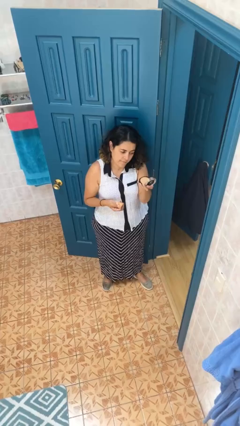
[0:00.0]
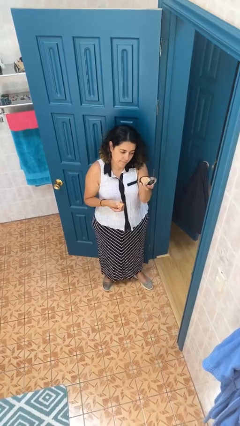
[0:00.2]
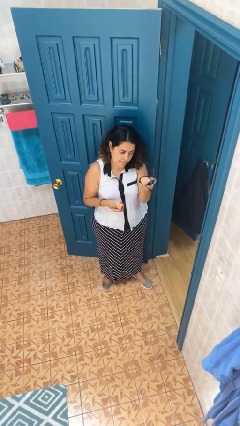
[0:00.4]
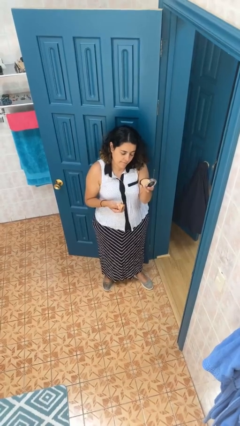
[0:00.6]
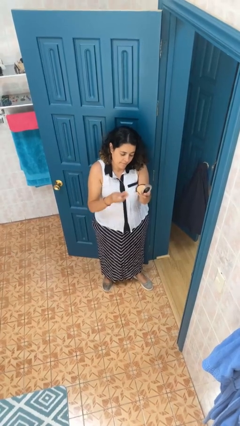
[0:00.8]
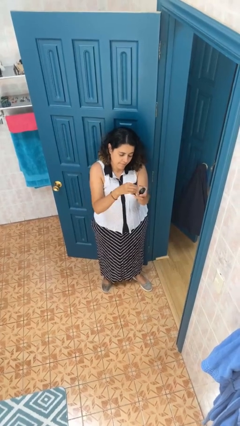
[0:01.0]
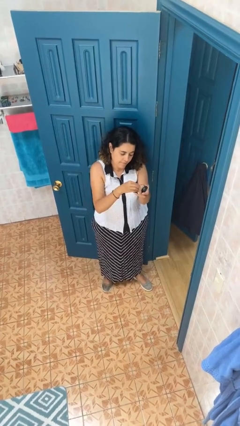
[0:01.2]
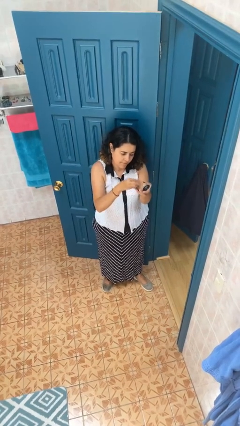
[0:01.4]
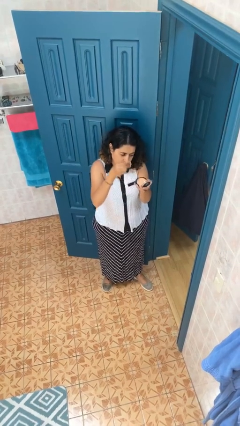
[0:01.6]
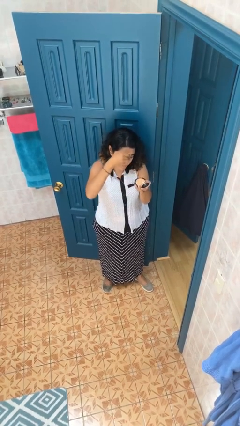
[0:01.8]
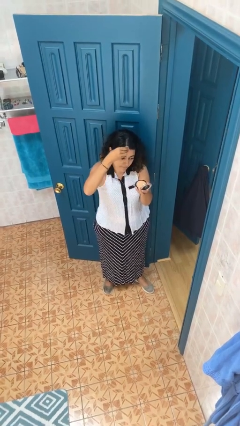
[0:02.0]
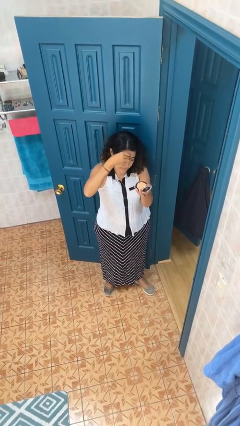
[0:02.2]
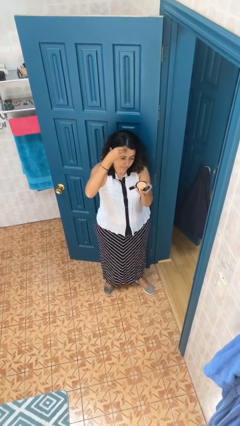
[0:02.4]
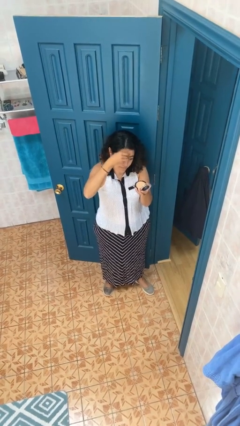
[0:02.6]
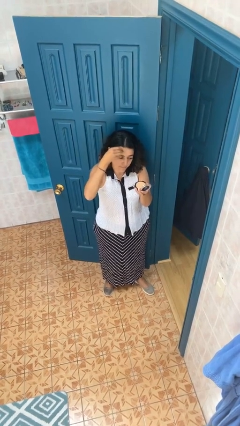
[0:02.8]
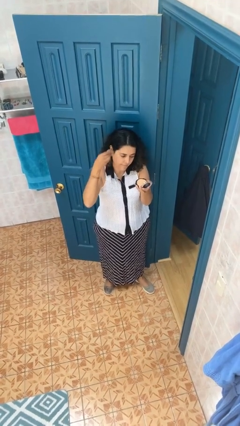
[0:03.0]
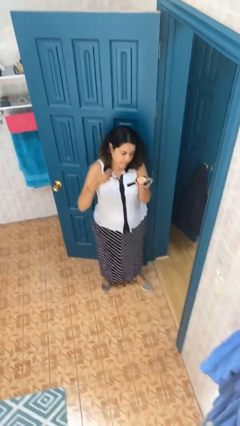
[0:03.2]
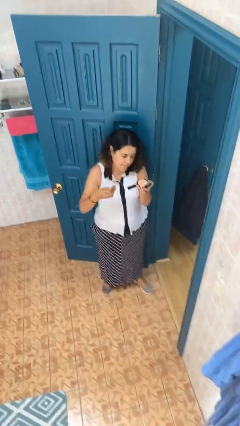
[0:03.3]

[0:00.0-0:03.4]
person applies foundation makeup

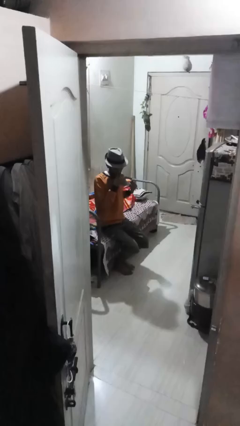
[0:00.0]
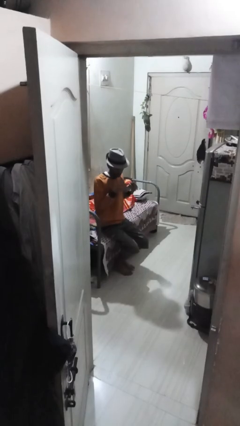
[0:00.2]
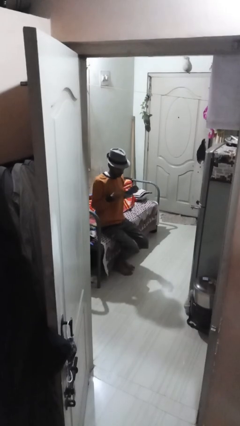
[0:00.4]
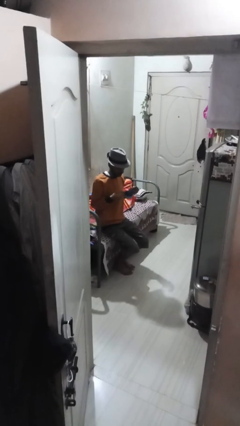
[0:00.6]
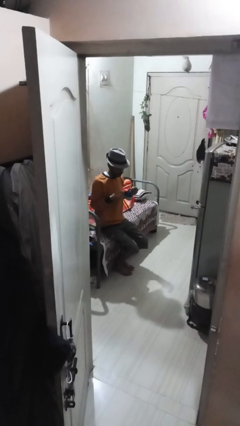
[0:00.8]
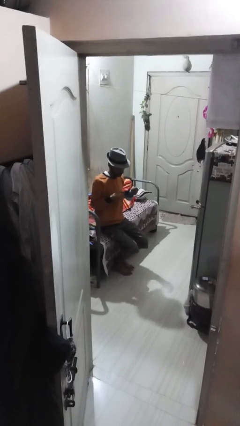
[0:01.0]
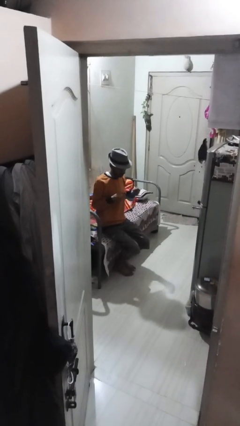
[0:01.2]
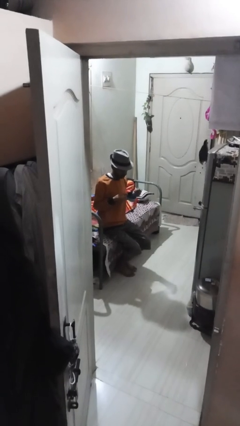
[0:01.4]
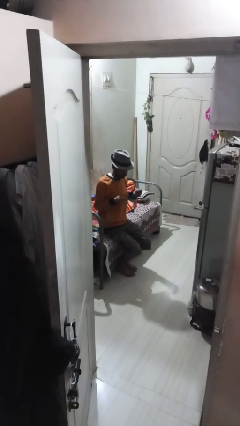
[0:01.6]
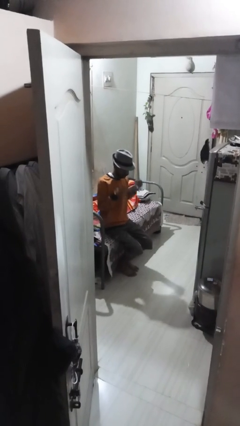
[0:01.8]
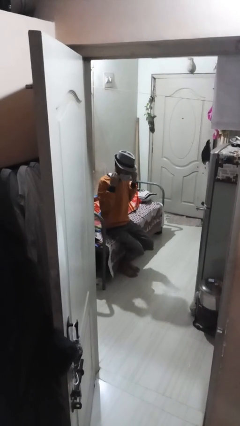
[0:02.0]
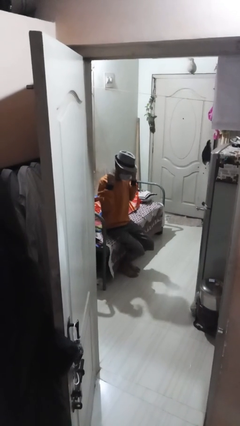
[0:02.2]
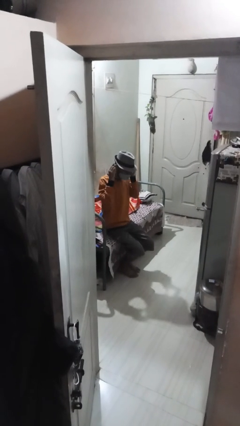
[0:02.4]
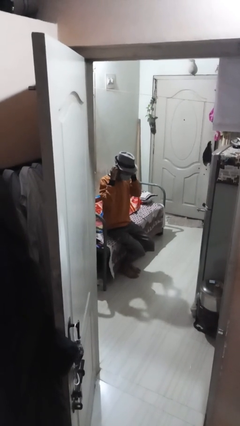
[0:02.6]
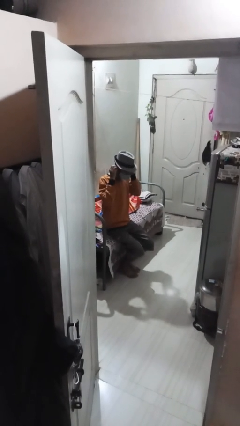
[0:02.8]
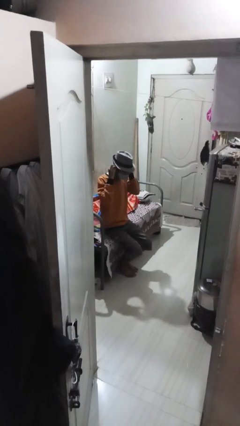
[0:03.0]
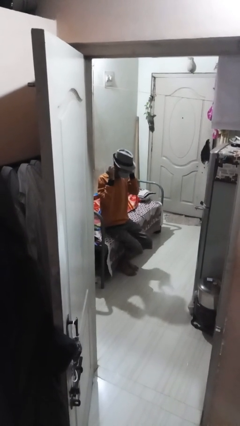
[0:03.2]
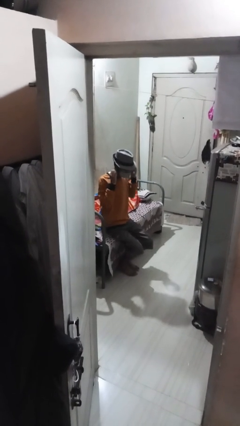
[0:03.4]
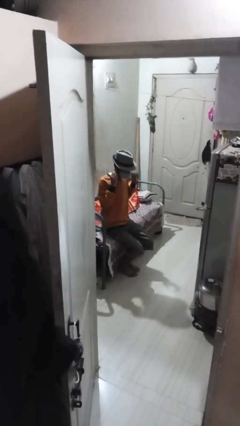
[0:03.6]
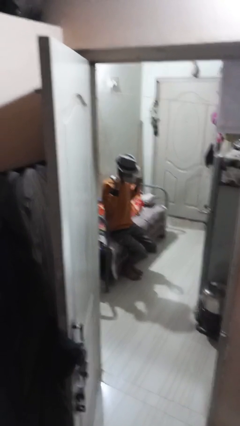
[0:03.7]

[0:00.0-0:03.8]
person puts on facemask

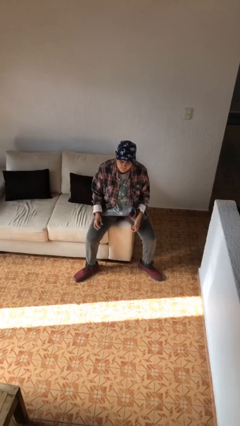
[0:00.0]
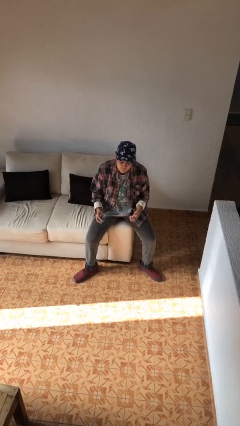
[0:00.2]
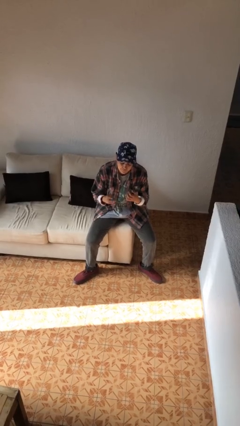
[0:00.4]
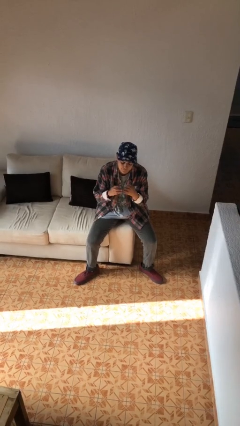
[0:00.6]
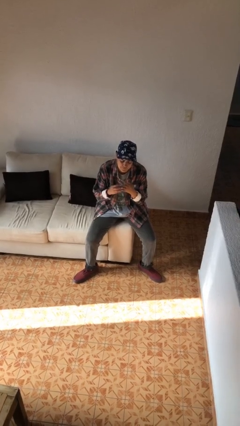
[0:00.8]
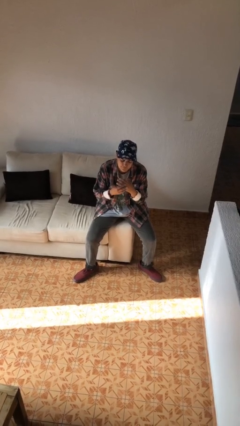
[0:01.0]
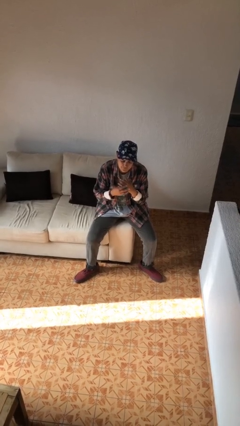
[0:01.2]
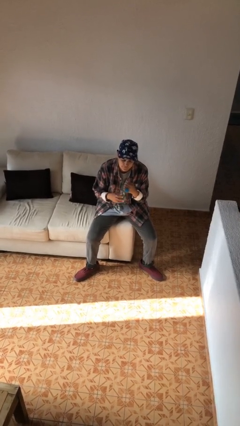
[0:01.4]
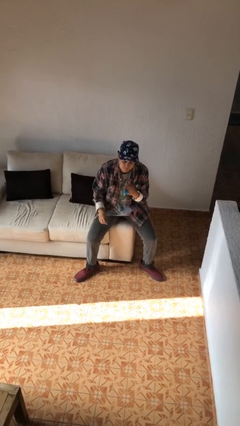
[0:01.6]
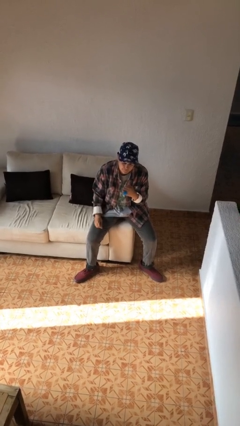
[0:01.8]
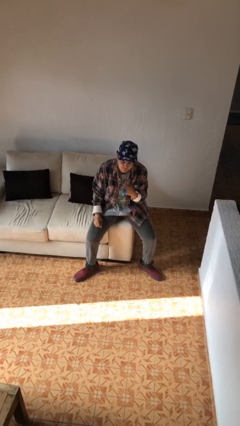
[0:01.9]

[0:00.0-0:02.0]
person puts on ring

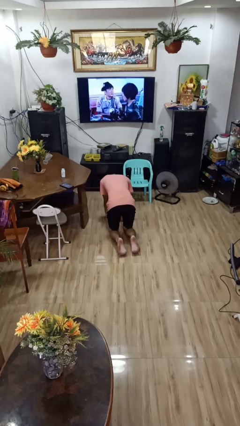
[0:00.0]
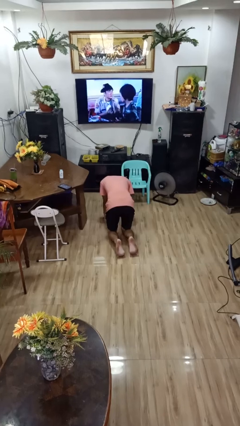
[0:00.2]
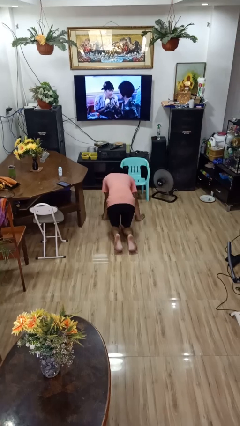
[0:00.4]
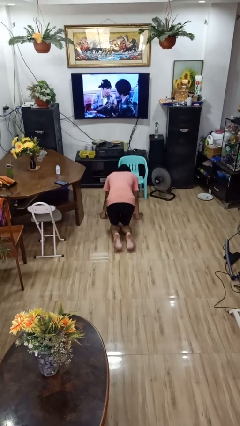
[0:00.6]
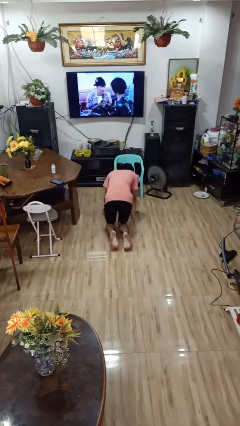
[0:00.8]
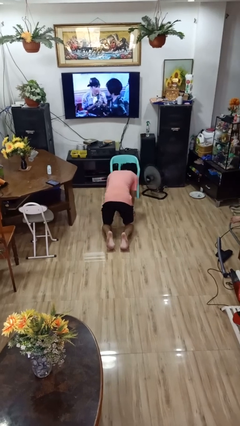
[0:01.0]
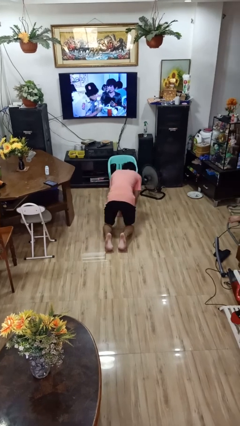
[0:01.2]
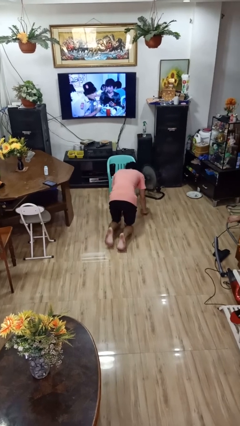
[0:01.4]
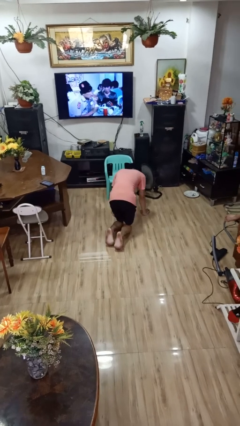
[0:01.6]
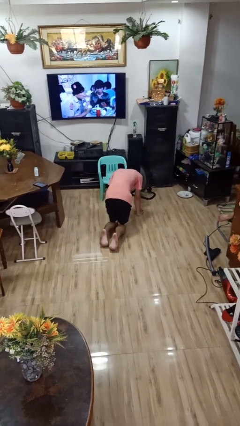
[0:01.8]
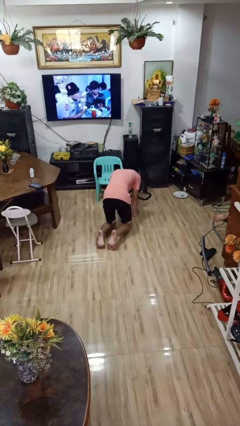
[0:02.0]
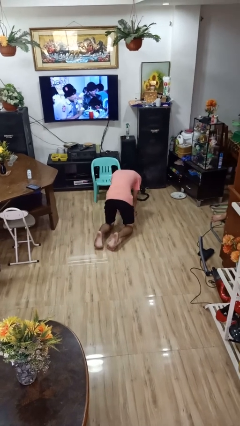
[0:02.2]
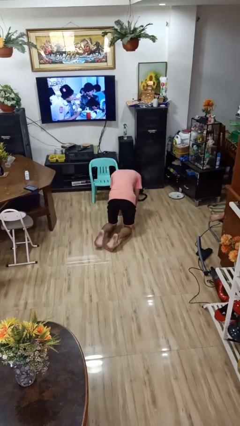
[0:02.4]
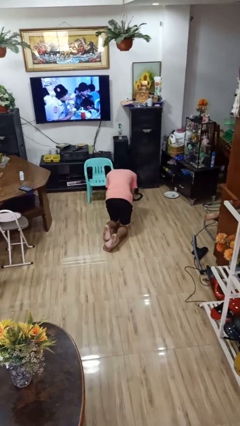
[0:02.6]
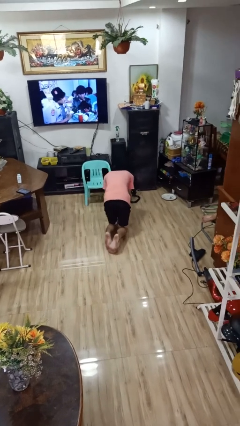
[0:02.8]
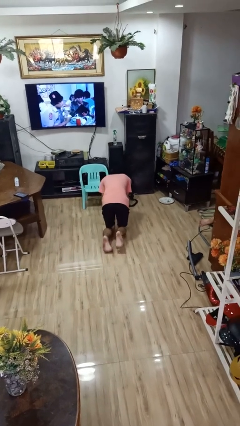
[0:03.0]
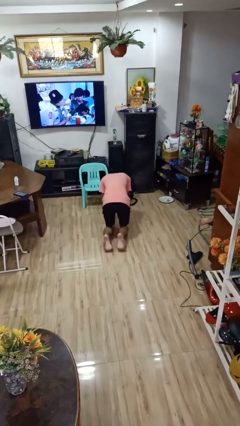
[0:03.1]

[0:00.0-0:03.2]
person crawls

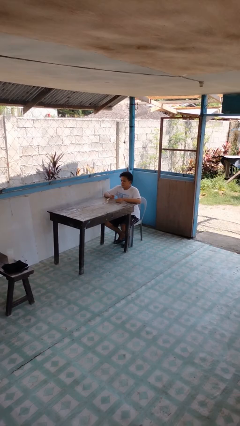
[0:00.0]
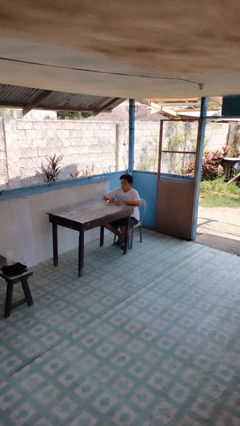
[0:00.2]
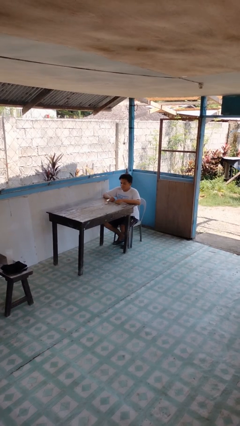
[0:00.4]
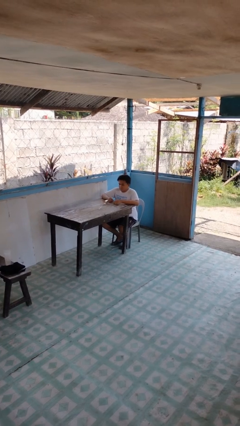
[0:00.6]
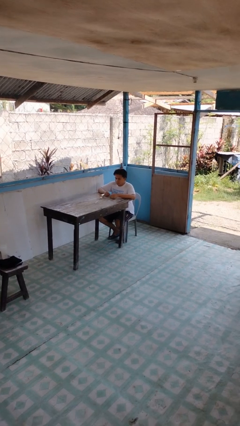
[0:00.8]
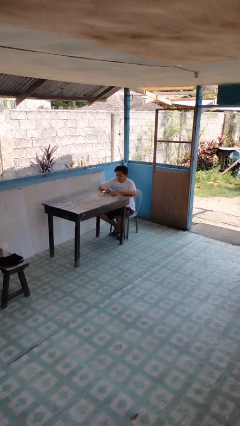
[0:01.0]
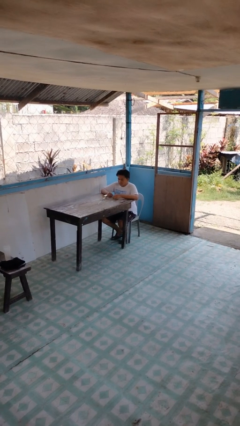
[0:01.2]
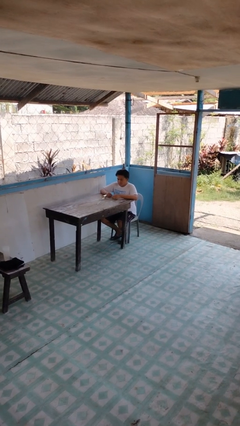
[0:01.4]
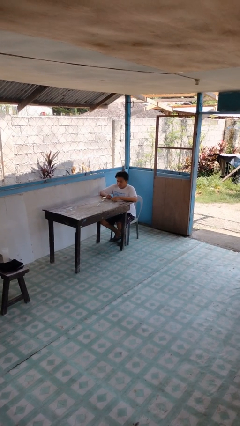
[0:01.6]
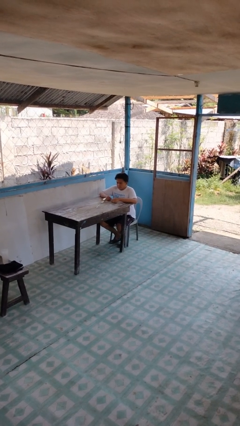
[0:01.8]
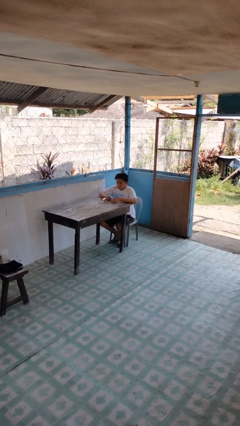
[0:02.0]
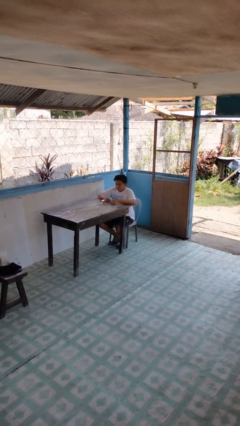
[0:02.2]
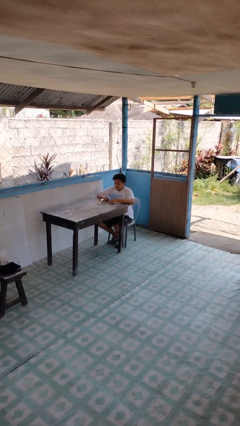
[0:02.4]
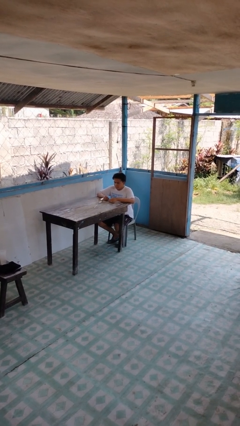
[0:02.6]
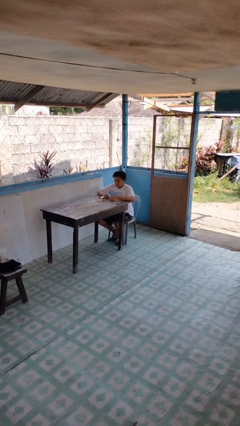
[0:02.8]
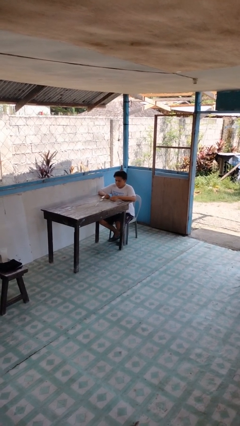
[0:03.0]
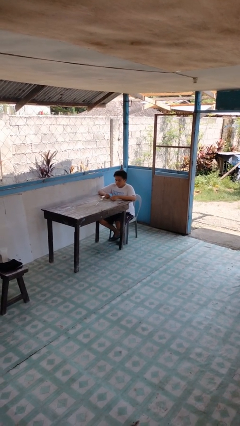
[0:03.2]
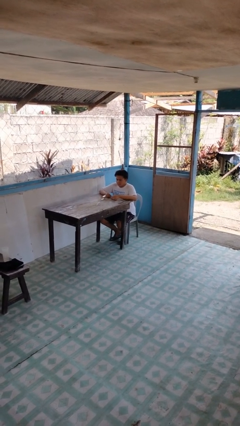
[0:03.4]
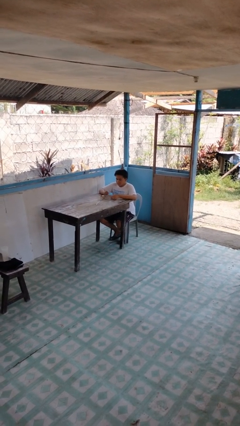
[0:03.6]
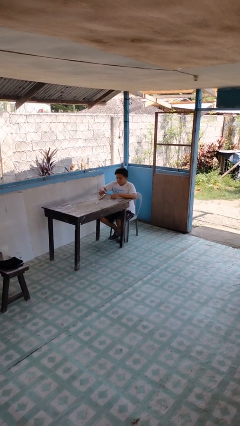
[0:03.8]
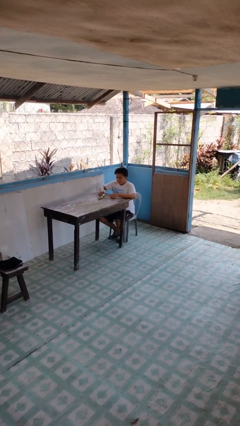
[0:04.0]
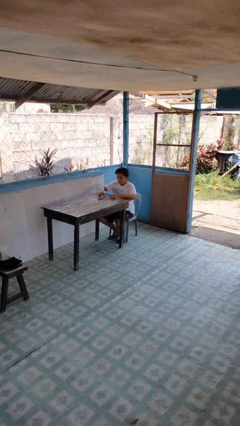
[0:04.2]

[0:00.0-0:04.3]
person spills on floor

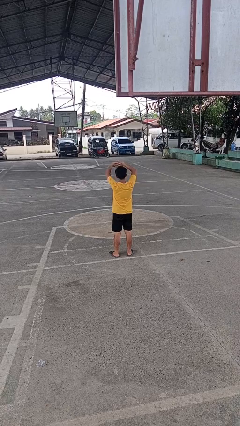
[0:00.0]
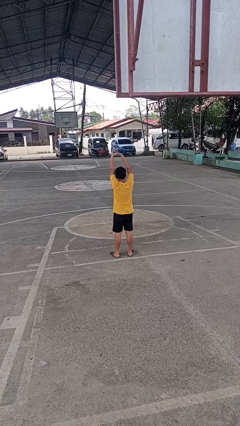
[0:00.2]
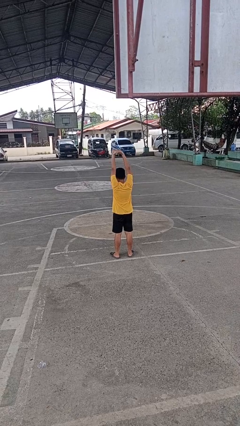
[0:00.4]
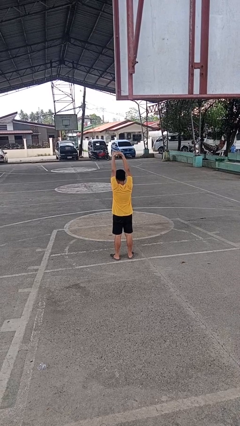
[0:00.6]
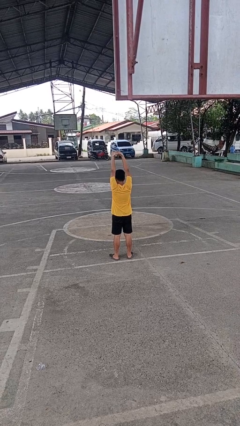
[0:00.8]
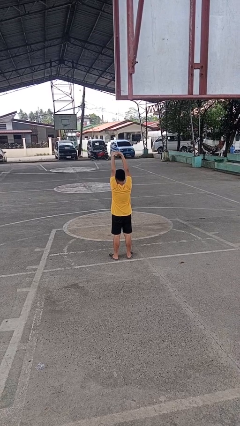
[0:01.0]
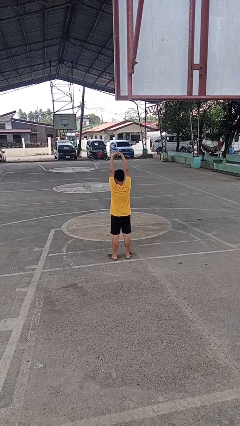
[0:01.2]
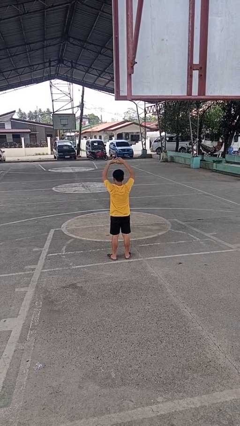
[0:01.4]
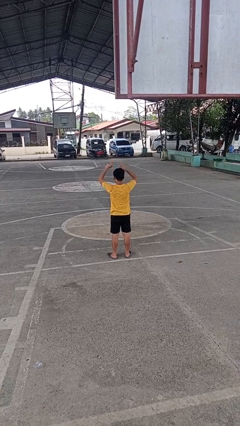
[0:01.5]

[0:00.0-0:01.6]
person stretches arms over head
